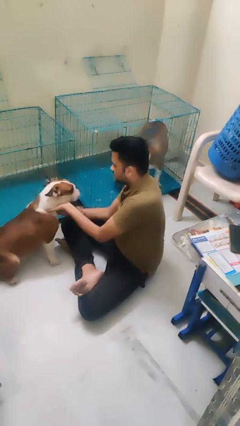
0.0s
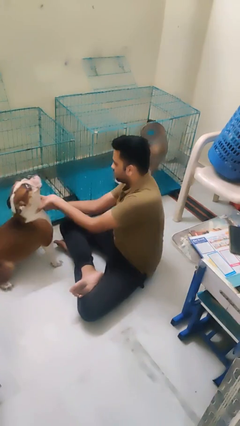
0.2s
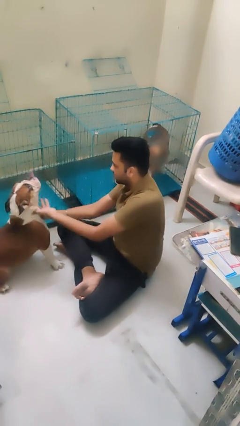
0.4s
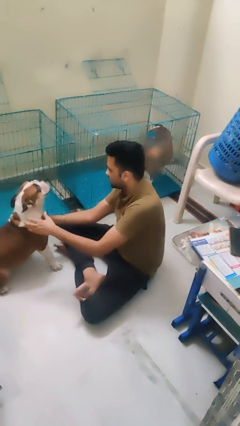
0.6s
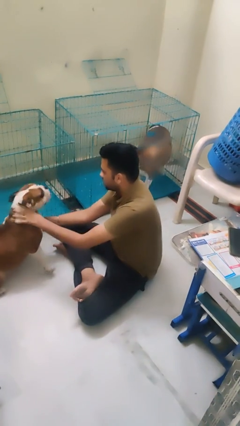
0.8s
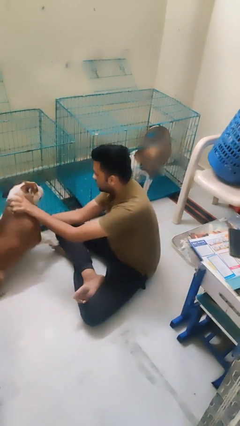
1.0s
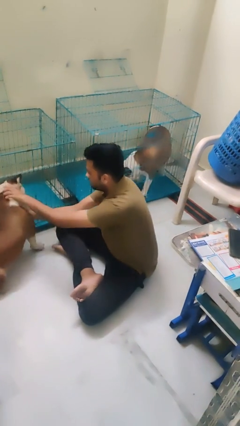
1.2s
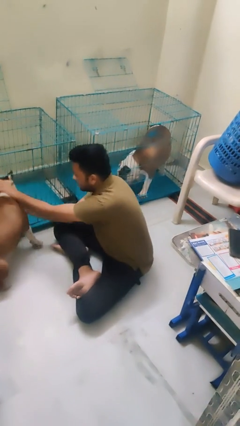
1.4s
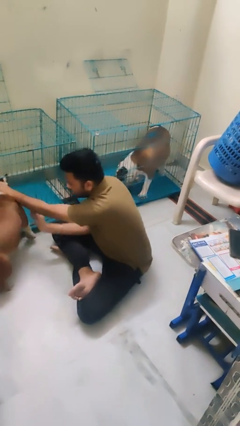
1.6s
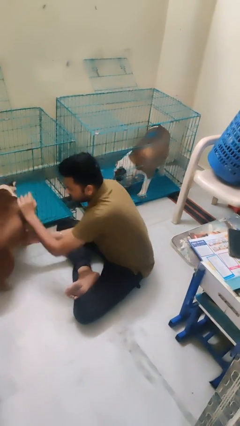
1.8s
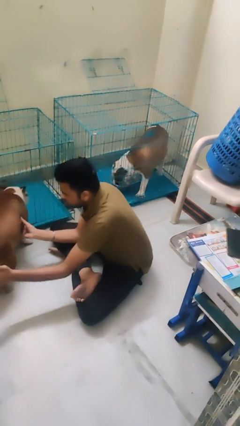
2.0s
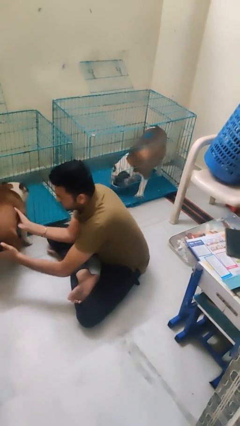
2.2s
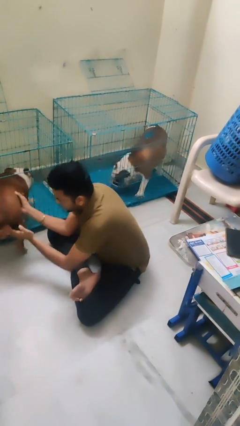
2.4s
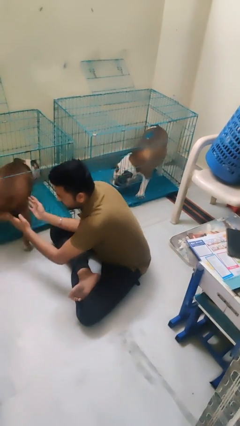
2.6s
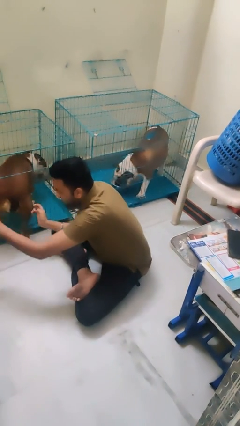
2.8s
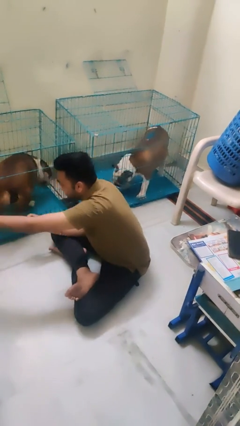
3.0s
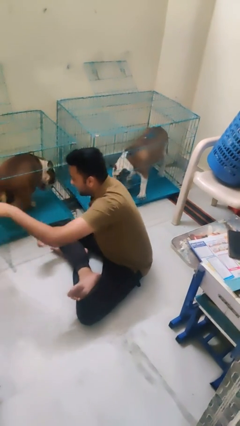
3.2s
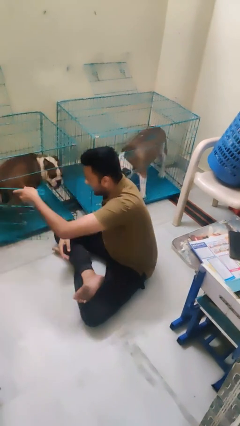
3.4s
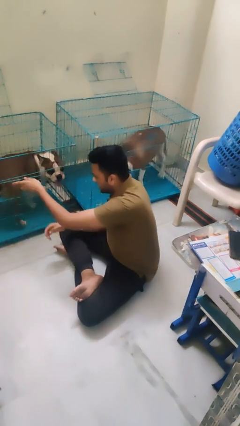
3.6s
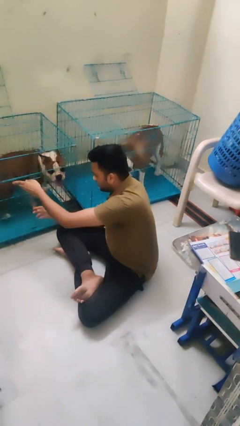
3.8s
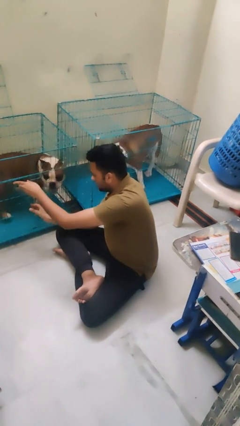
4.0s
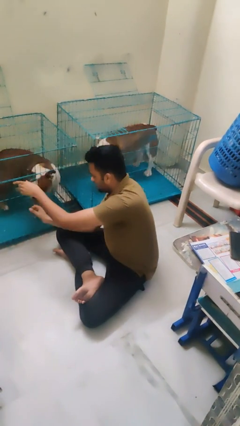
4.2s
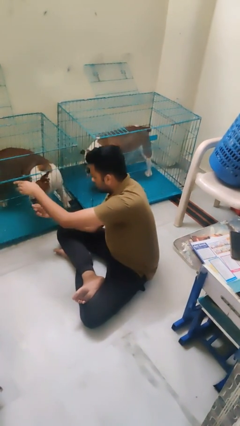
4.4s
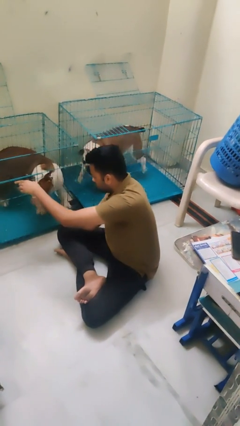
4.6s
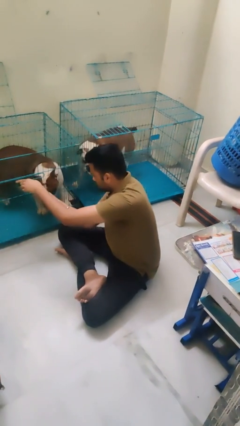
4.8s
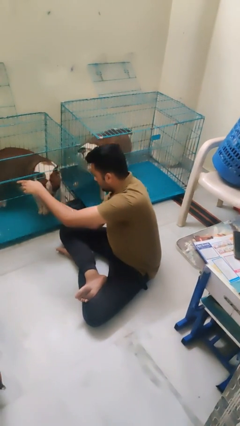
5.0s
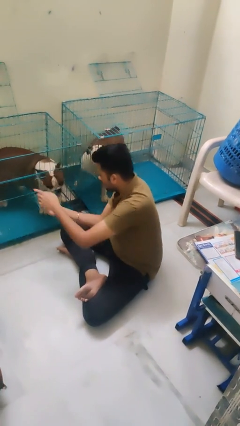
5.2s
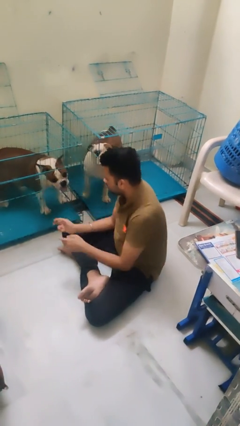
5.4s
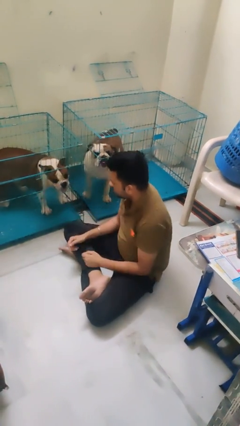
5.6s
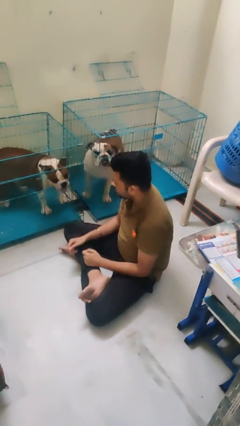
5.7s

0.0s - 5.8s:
person crates dog

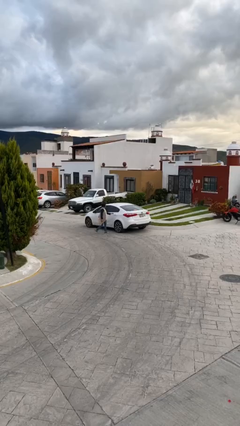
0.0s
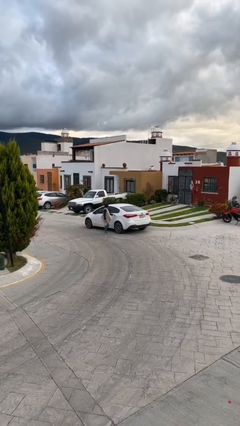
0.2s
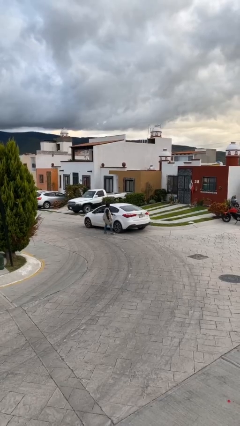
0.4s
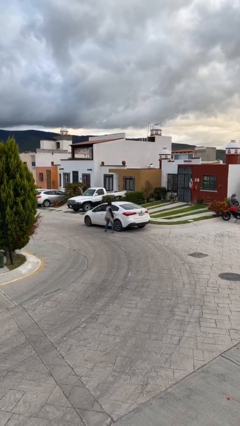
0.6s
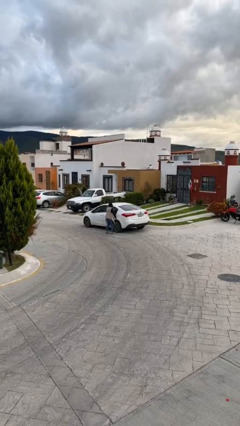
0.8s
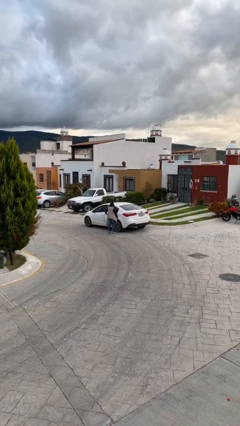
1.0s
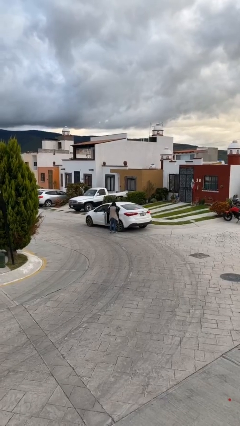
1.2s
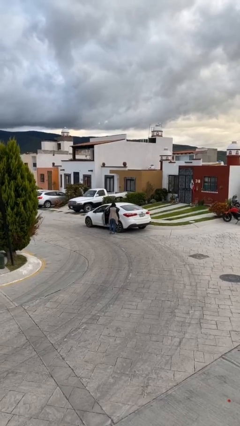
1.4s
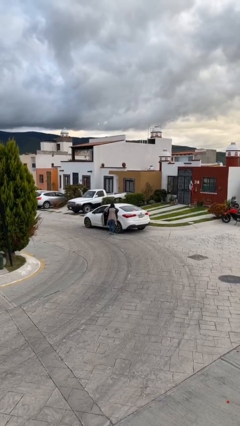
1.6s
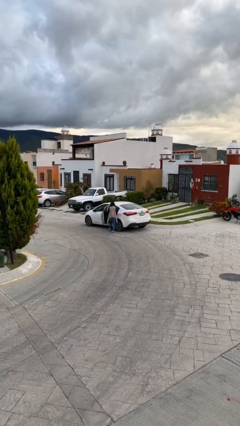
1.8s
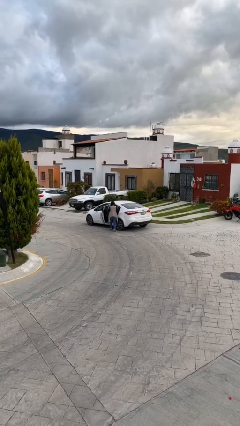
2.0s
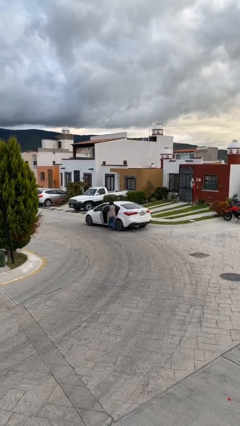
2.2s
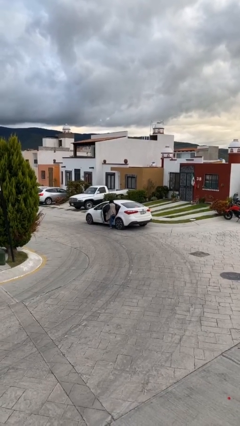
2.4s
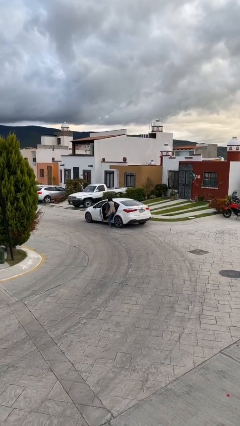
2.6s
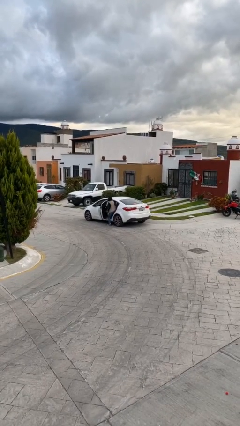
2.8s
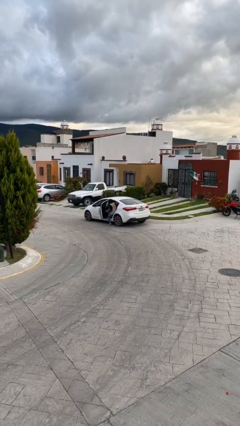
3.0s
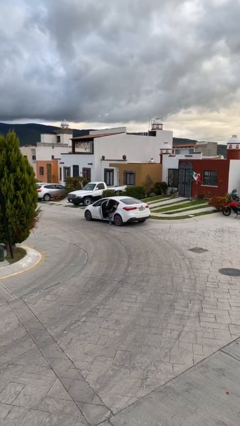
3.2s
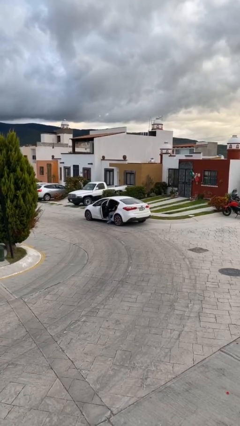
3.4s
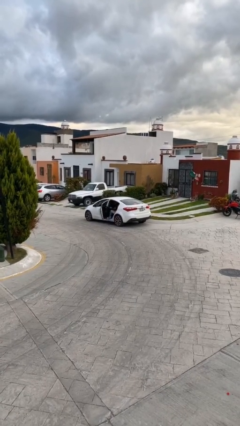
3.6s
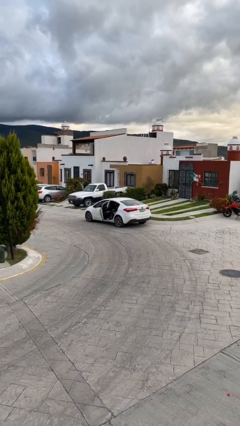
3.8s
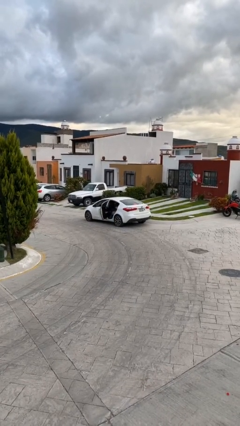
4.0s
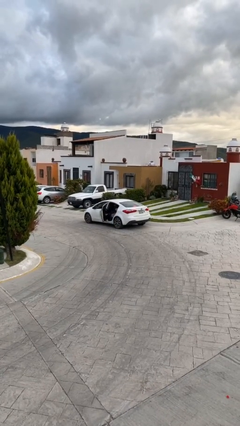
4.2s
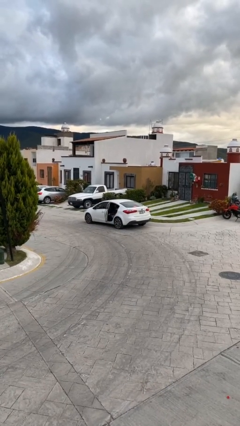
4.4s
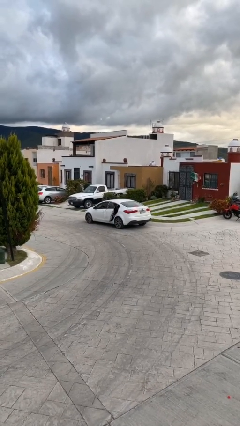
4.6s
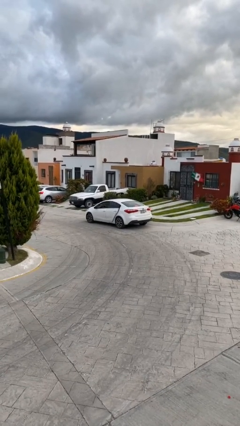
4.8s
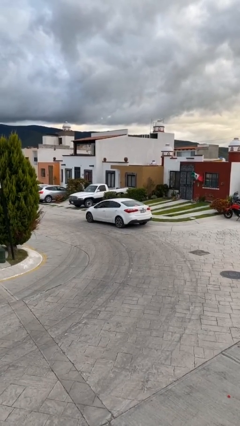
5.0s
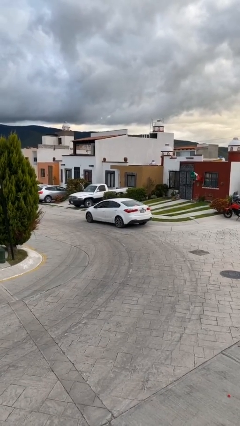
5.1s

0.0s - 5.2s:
car picks up person

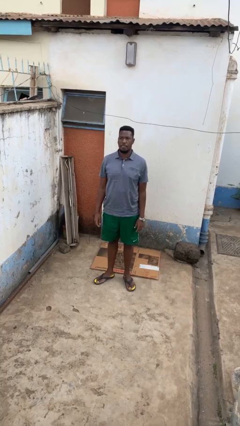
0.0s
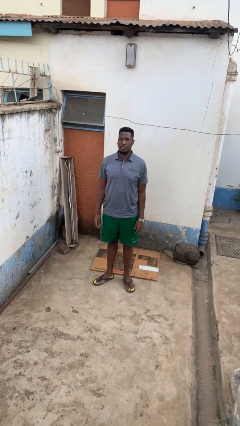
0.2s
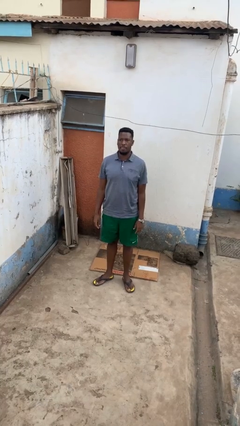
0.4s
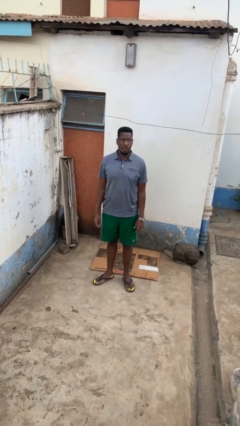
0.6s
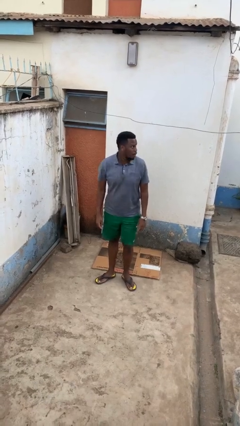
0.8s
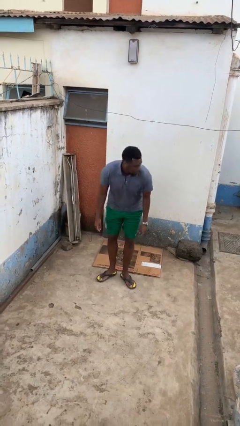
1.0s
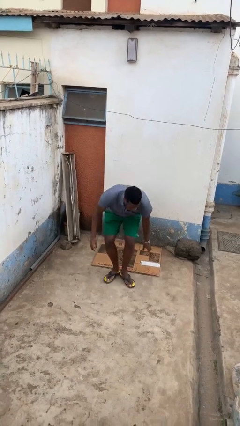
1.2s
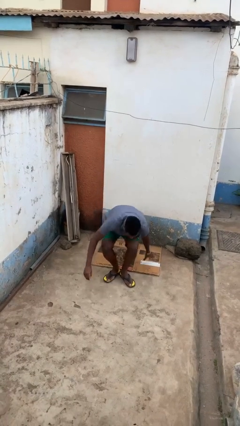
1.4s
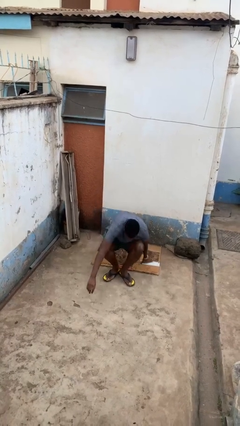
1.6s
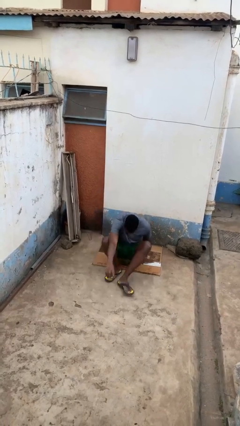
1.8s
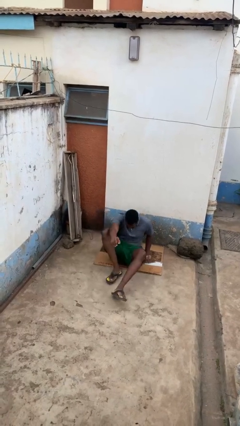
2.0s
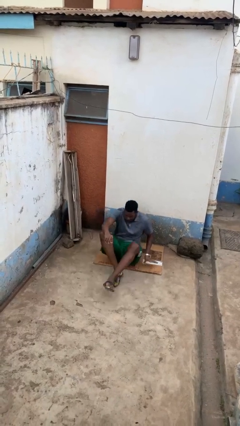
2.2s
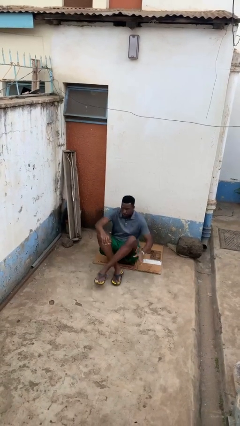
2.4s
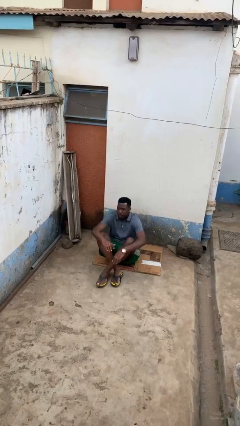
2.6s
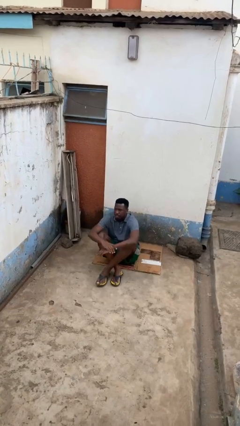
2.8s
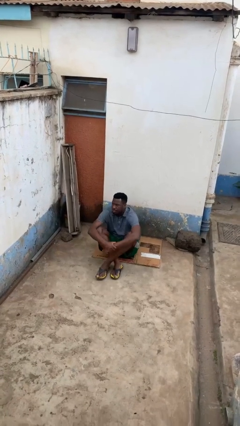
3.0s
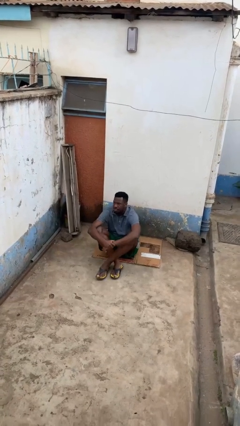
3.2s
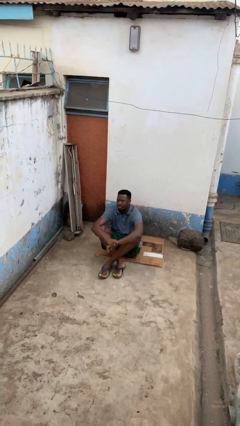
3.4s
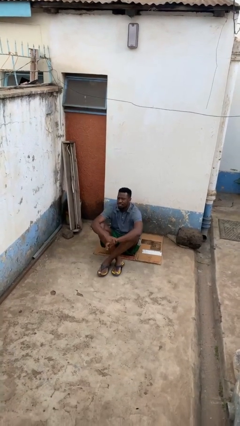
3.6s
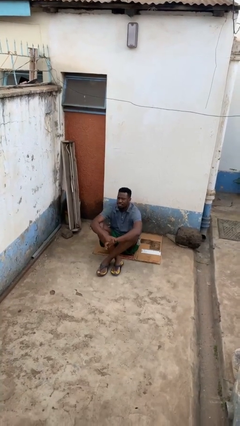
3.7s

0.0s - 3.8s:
person sits crisscross

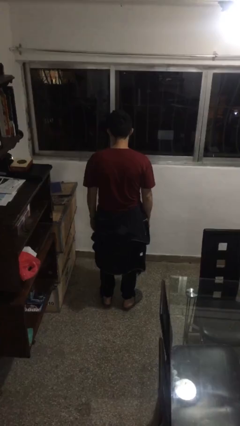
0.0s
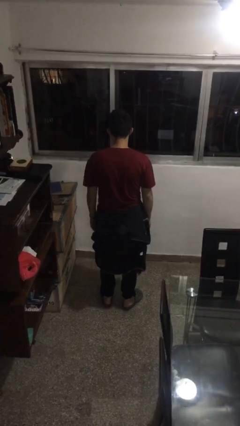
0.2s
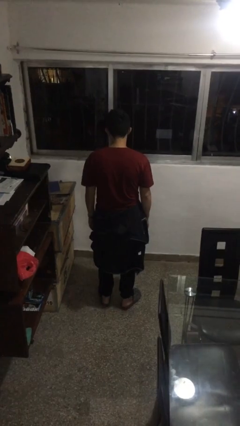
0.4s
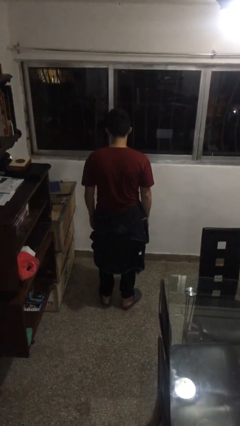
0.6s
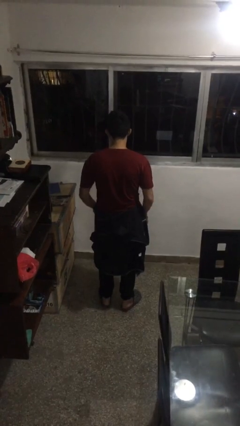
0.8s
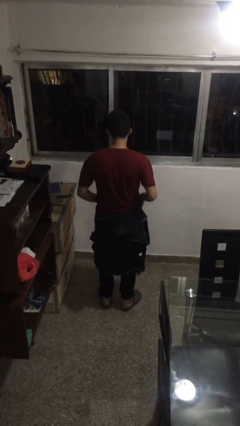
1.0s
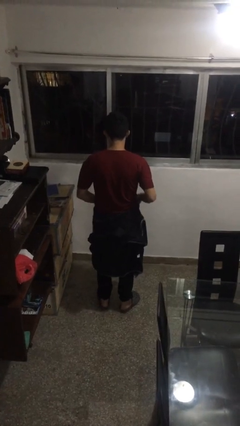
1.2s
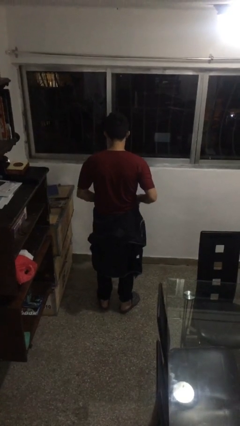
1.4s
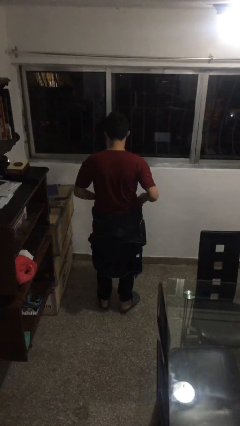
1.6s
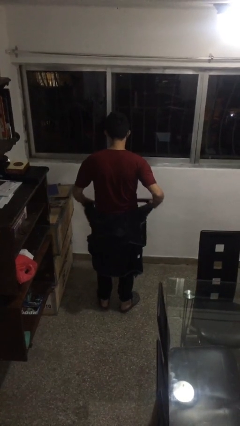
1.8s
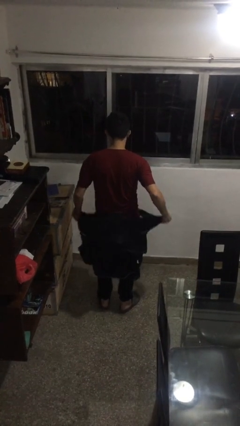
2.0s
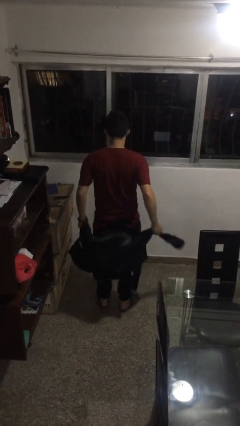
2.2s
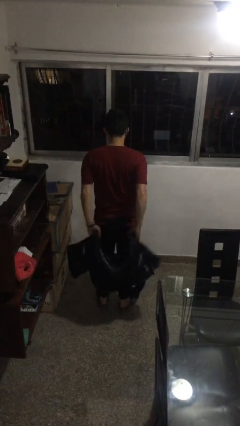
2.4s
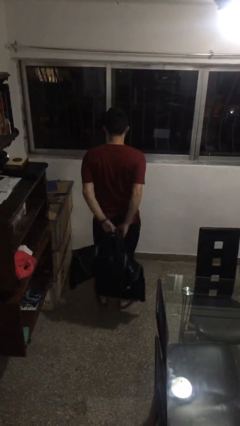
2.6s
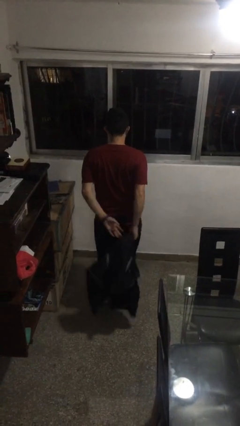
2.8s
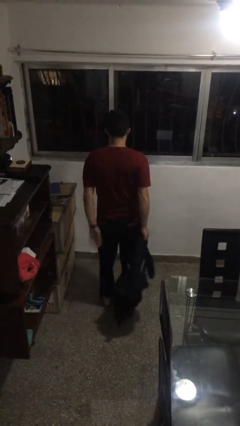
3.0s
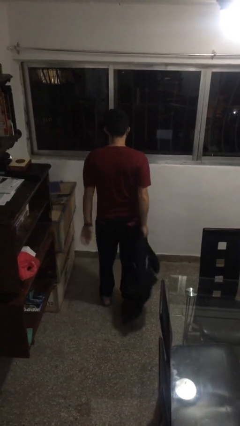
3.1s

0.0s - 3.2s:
person unties jacket around waist

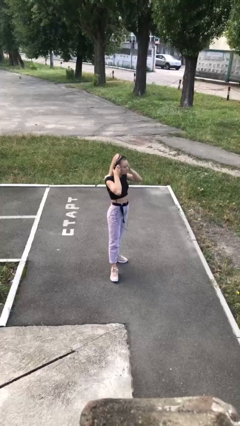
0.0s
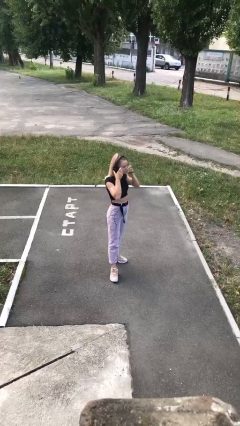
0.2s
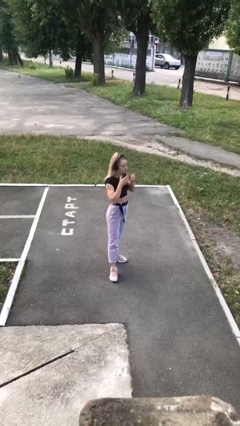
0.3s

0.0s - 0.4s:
person puts on headphones
